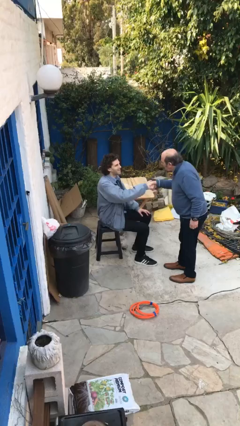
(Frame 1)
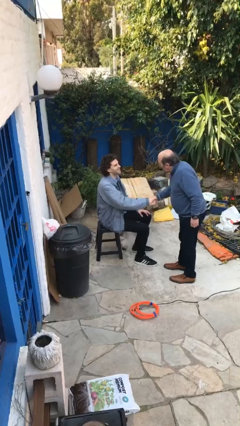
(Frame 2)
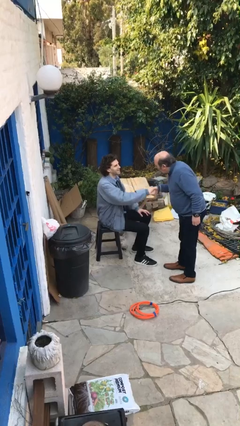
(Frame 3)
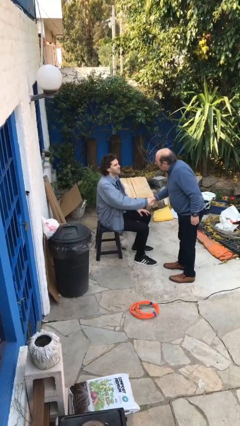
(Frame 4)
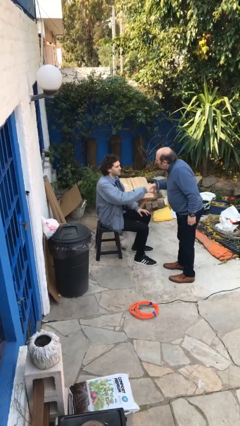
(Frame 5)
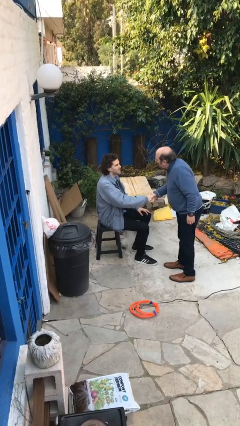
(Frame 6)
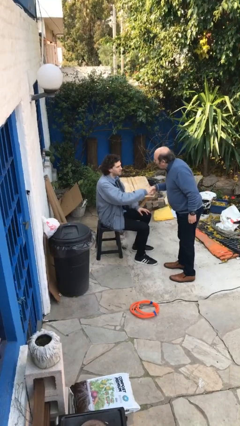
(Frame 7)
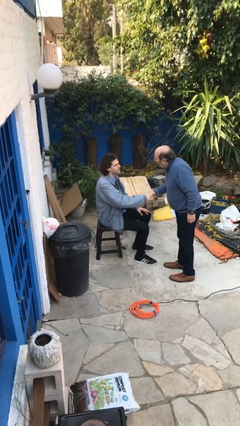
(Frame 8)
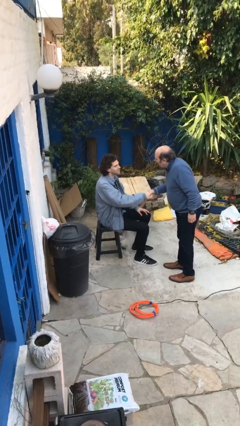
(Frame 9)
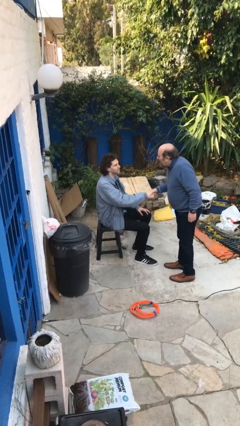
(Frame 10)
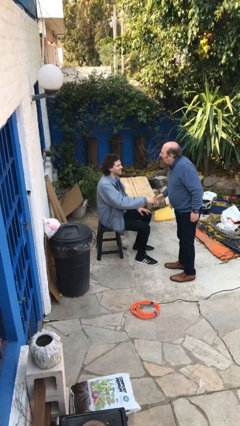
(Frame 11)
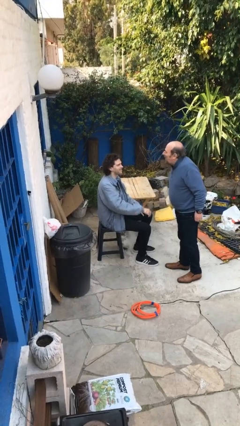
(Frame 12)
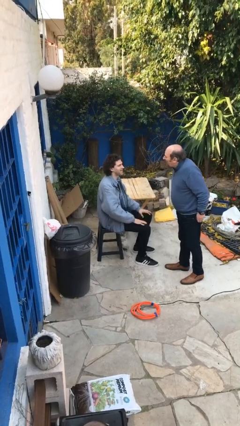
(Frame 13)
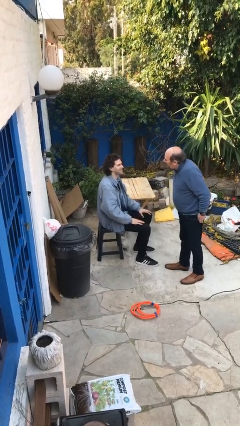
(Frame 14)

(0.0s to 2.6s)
person shakes hand

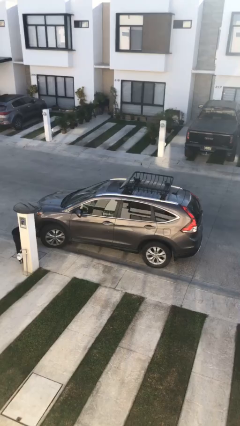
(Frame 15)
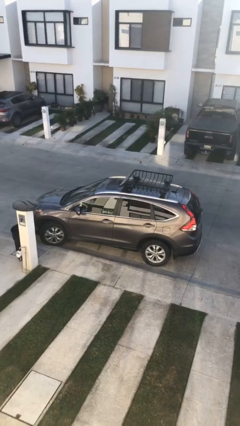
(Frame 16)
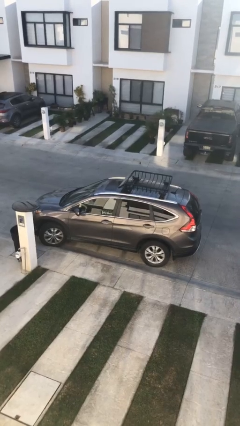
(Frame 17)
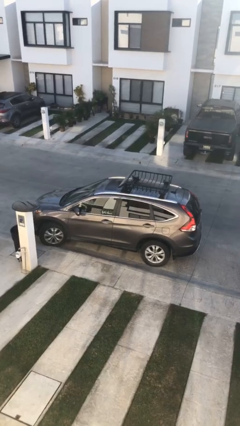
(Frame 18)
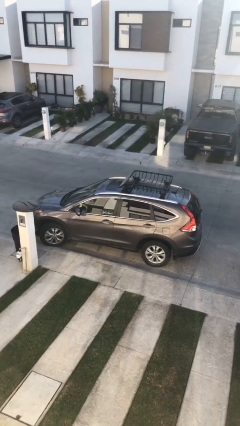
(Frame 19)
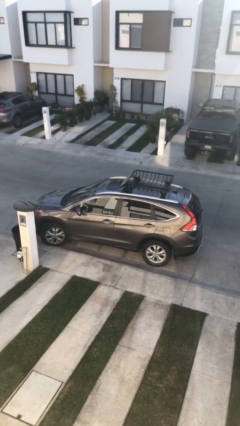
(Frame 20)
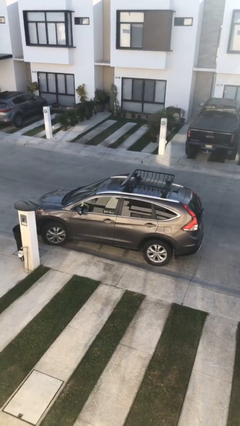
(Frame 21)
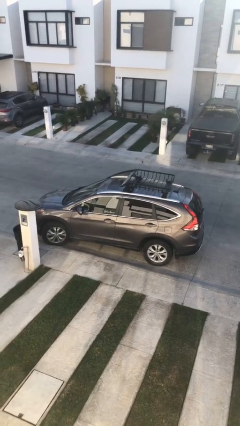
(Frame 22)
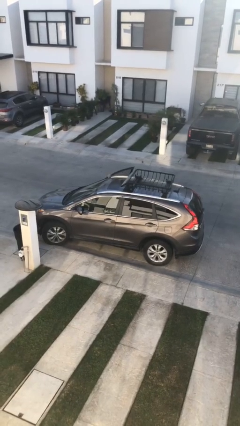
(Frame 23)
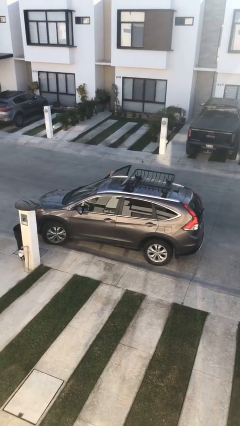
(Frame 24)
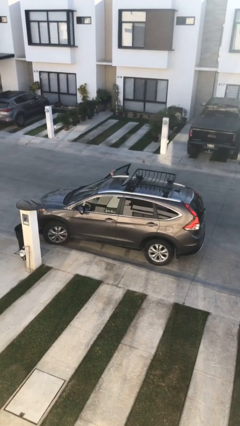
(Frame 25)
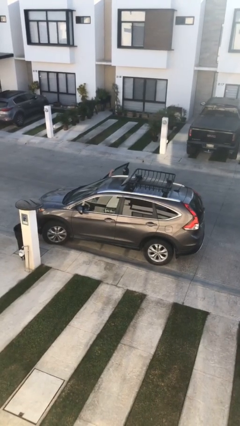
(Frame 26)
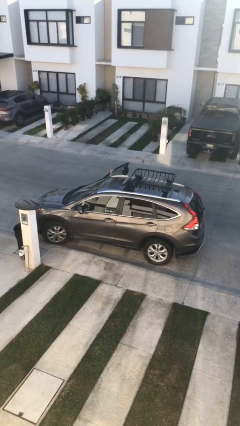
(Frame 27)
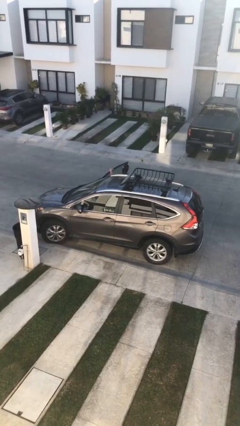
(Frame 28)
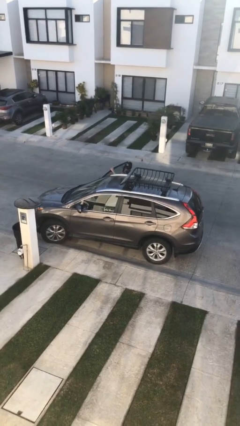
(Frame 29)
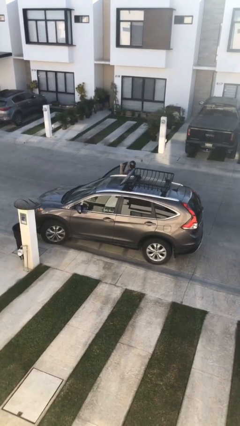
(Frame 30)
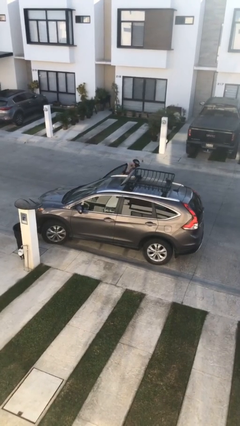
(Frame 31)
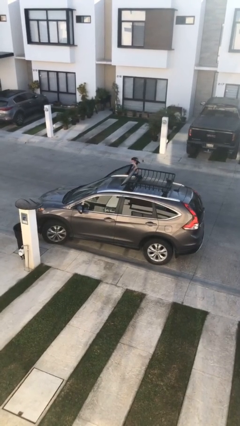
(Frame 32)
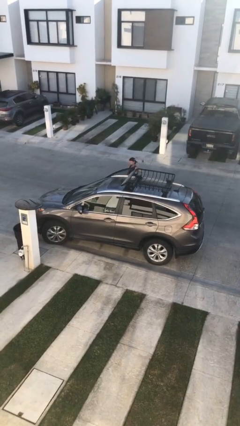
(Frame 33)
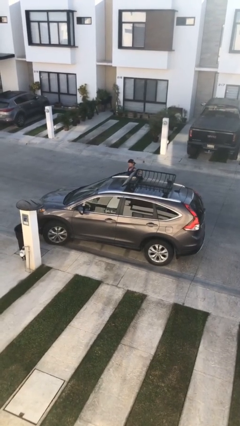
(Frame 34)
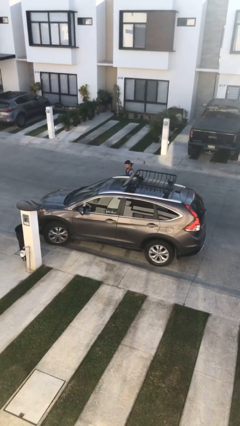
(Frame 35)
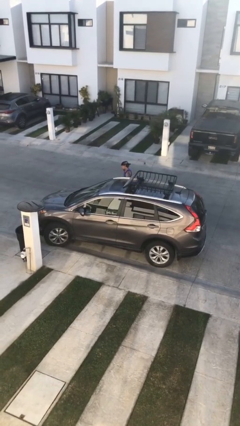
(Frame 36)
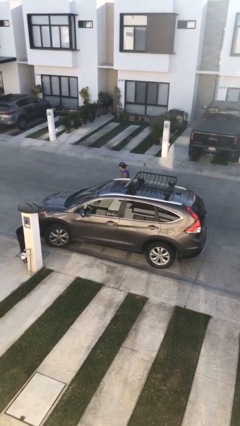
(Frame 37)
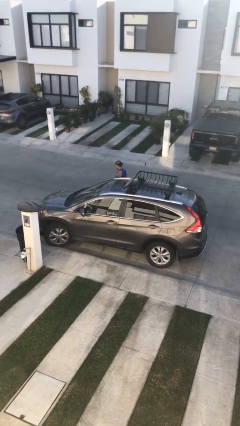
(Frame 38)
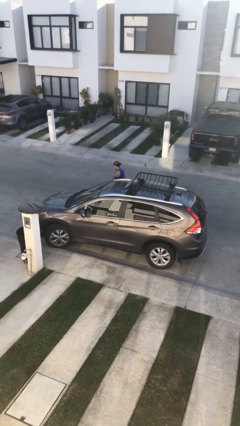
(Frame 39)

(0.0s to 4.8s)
car drops off person

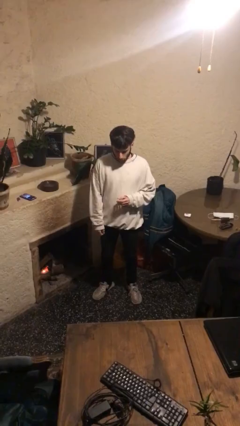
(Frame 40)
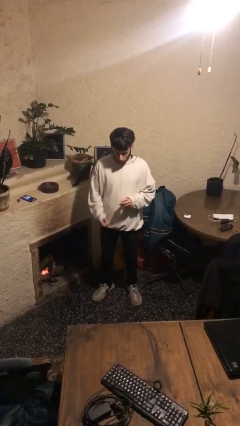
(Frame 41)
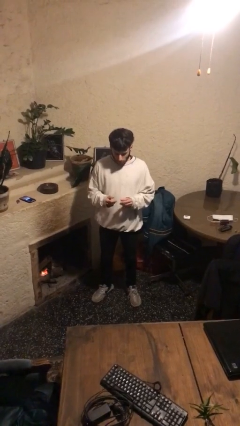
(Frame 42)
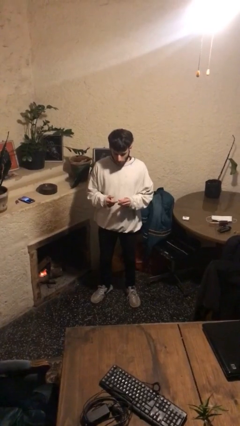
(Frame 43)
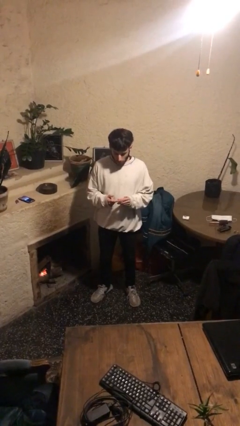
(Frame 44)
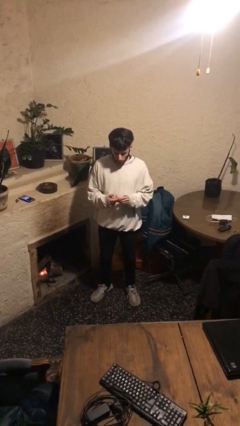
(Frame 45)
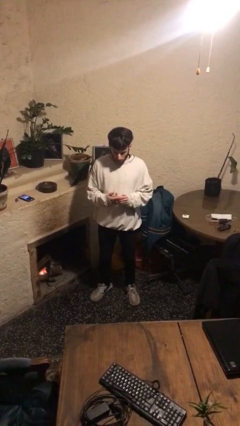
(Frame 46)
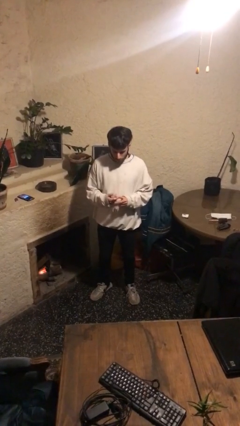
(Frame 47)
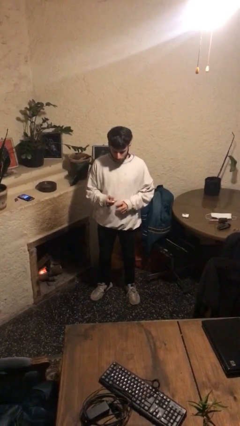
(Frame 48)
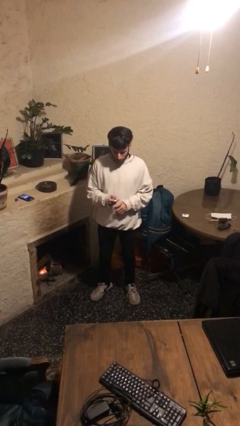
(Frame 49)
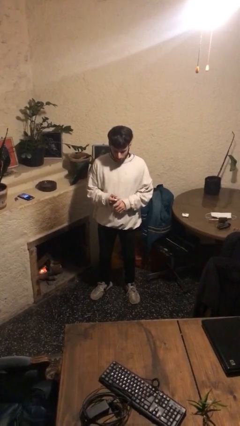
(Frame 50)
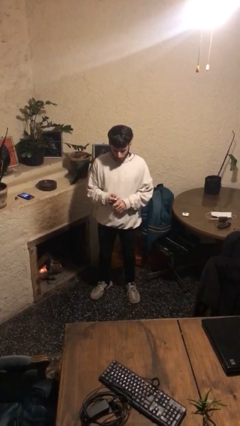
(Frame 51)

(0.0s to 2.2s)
person puts on ring

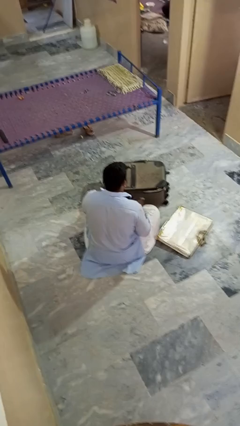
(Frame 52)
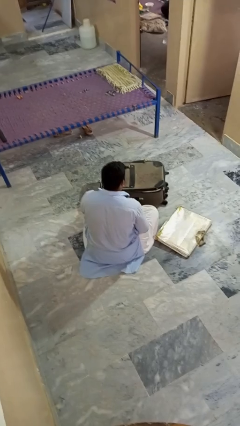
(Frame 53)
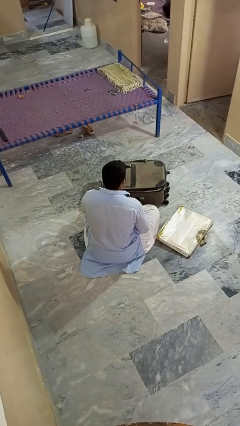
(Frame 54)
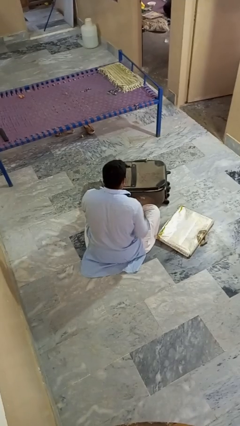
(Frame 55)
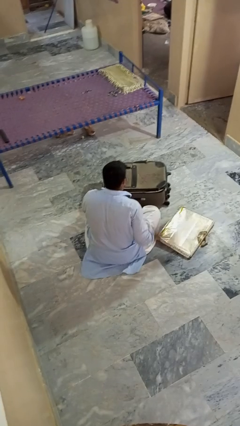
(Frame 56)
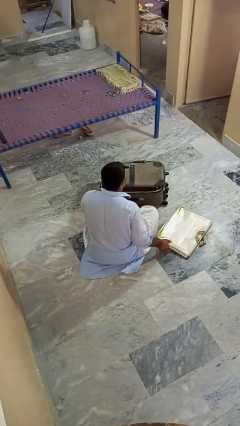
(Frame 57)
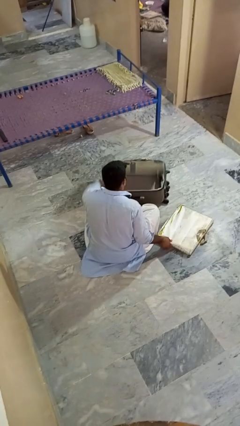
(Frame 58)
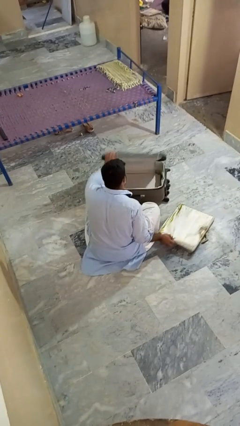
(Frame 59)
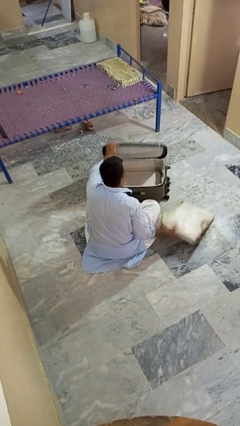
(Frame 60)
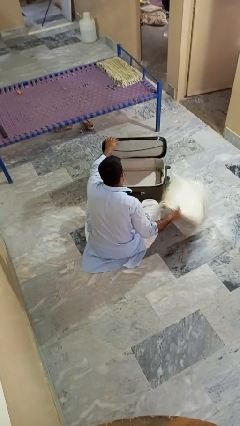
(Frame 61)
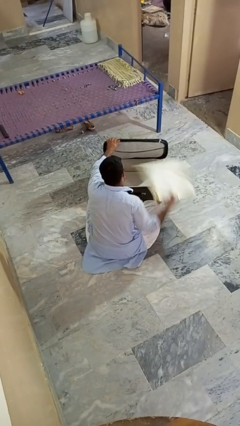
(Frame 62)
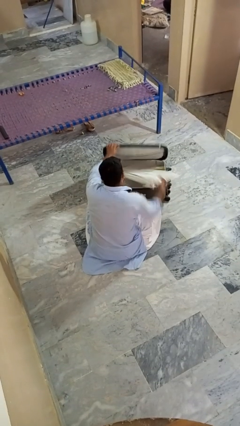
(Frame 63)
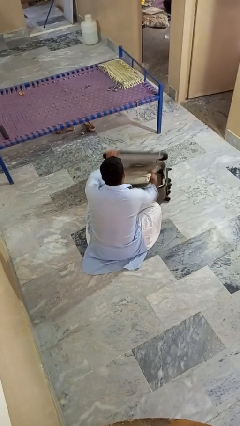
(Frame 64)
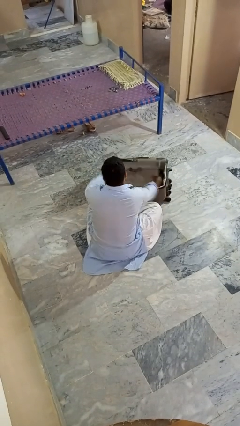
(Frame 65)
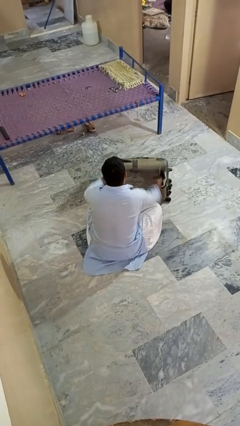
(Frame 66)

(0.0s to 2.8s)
person puts object into bag

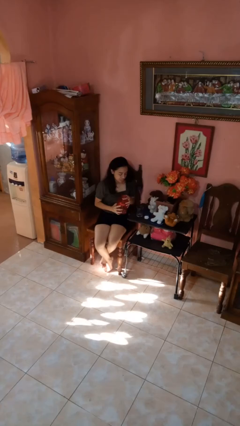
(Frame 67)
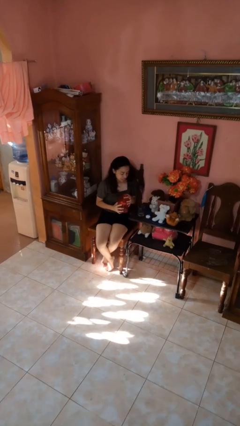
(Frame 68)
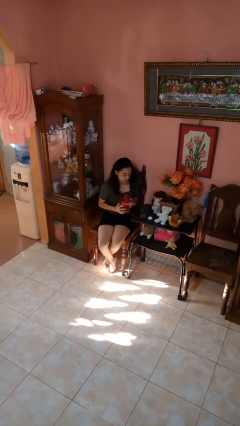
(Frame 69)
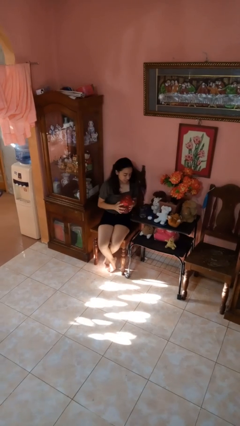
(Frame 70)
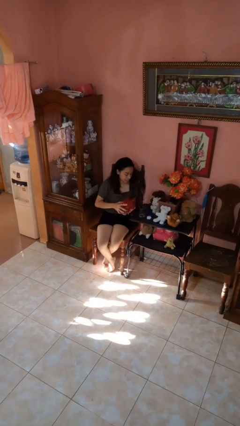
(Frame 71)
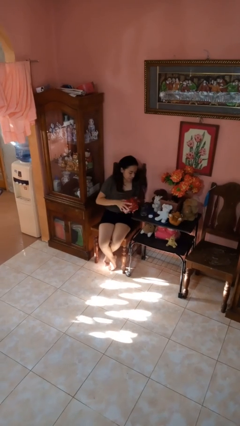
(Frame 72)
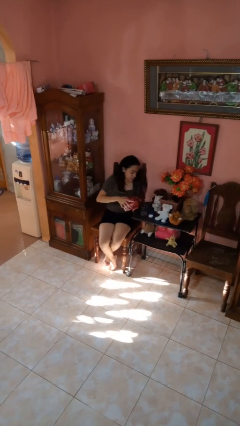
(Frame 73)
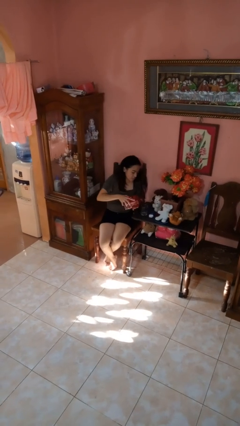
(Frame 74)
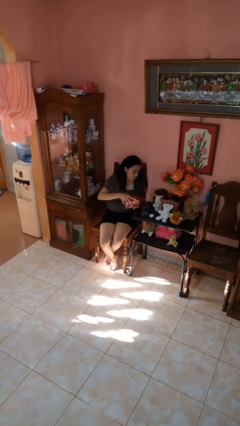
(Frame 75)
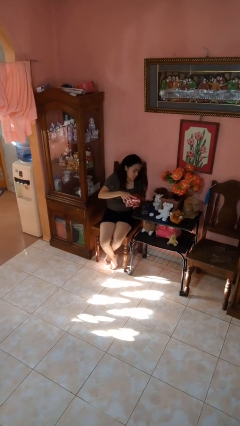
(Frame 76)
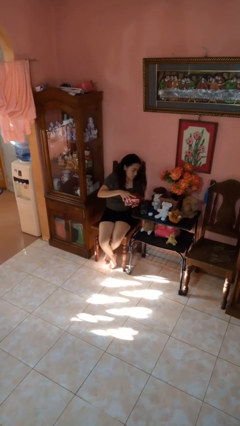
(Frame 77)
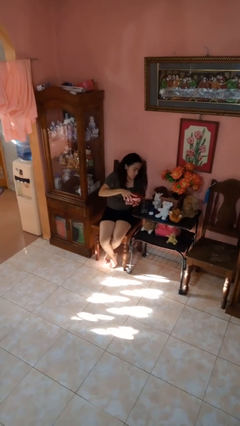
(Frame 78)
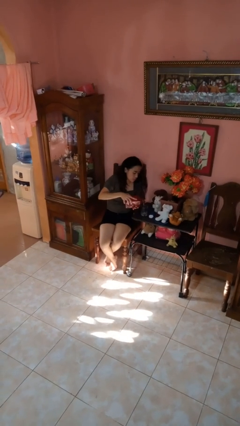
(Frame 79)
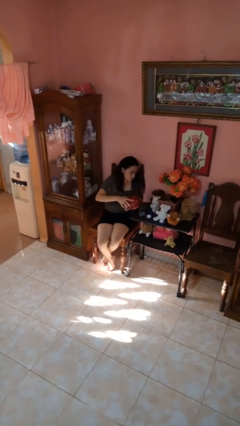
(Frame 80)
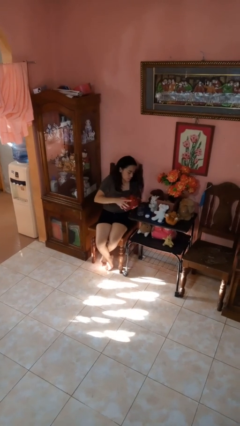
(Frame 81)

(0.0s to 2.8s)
person pours liquid into cup

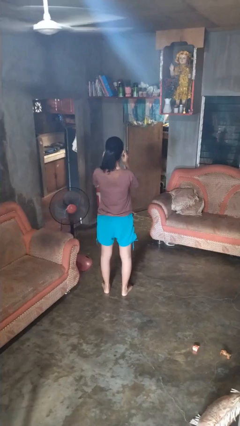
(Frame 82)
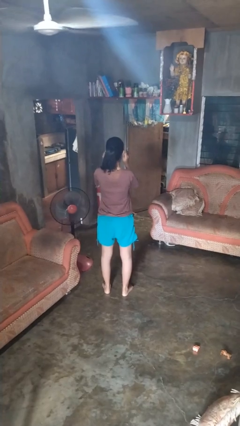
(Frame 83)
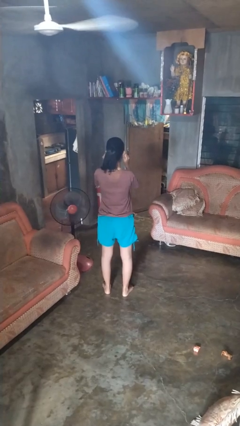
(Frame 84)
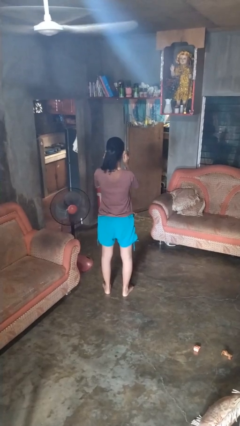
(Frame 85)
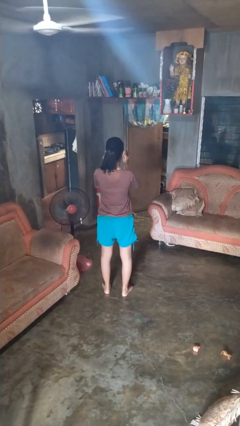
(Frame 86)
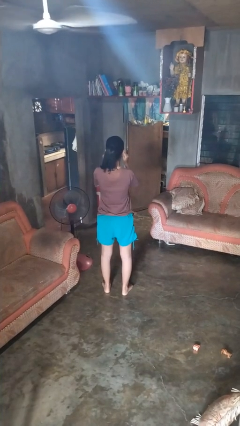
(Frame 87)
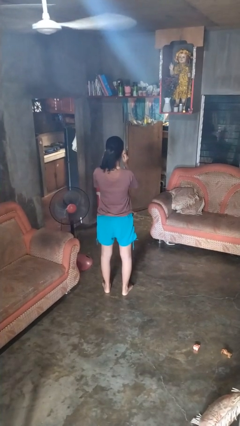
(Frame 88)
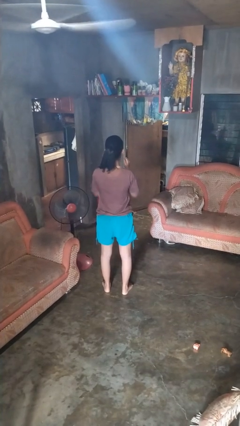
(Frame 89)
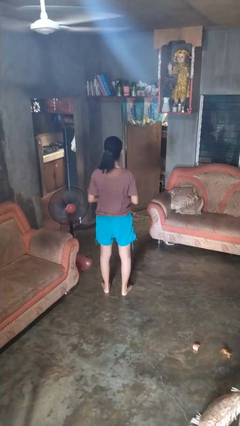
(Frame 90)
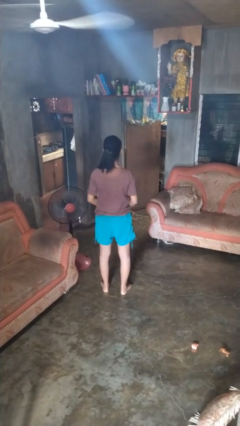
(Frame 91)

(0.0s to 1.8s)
person touches earlobe

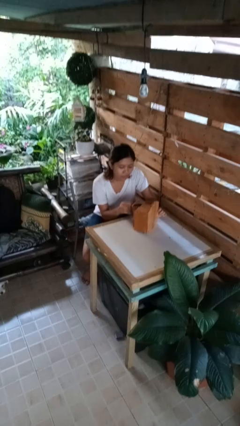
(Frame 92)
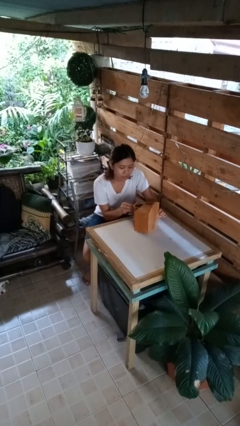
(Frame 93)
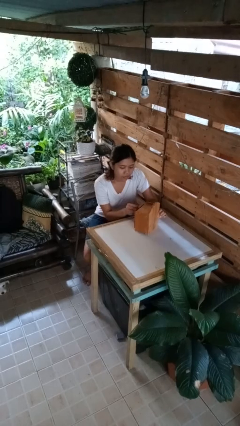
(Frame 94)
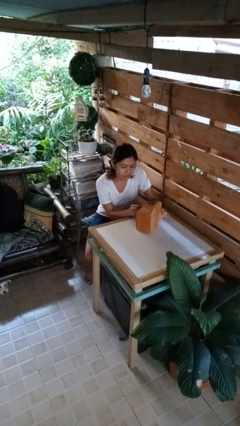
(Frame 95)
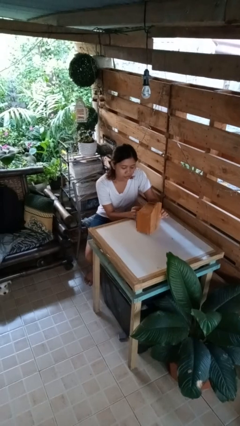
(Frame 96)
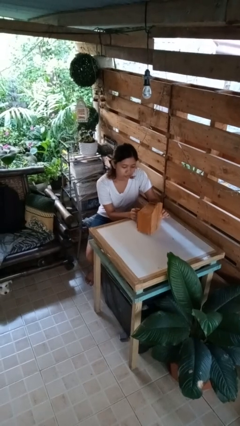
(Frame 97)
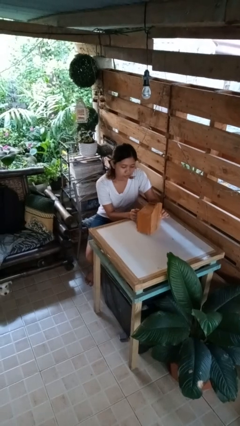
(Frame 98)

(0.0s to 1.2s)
person closes jewelry box
